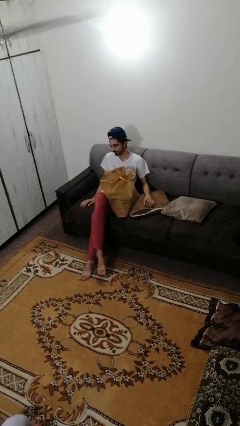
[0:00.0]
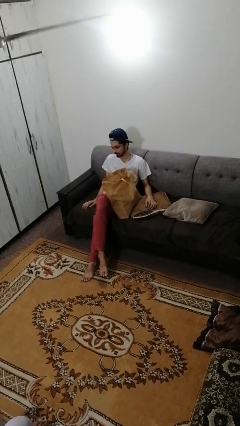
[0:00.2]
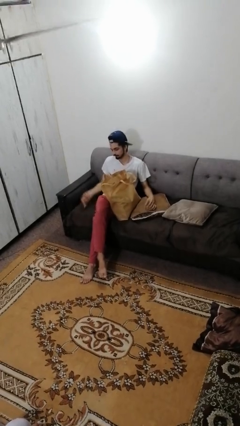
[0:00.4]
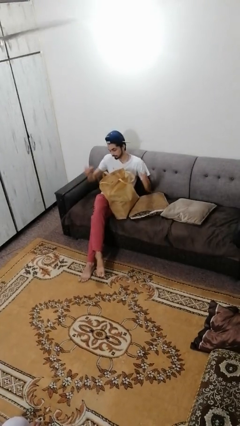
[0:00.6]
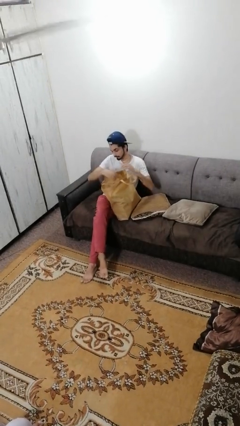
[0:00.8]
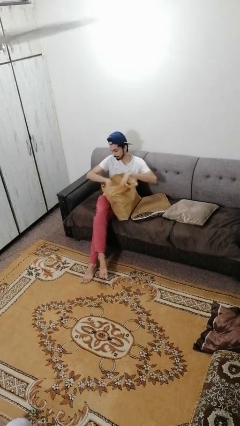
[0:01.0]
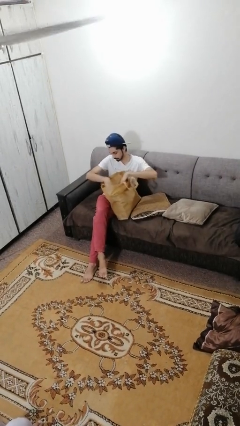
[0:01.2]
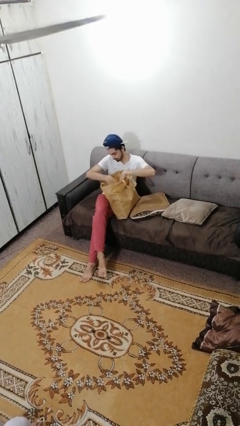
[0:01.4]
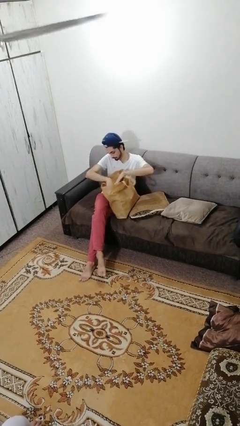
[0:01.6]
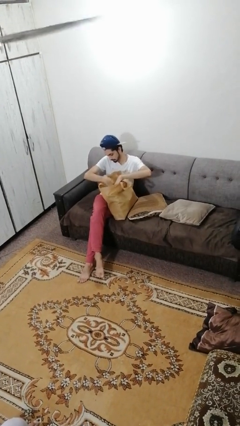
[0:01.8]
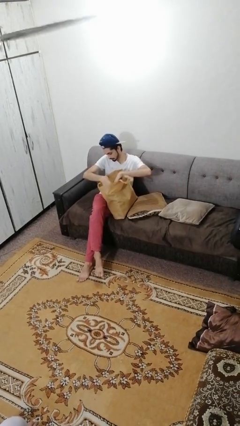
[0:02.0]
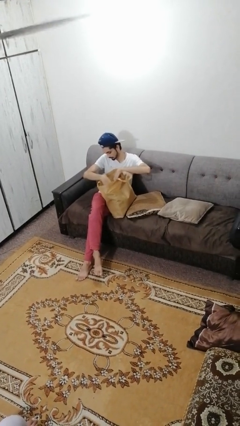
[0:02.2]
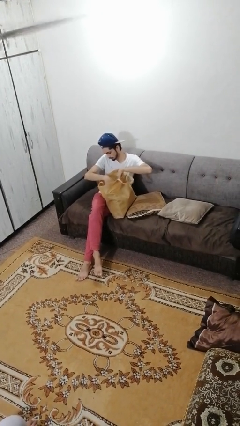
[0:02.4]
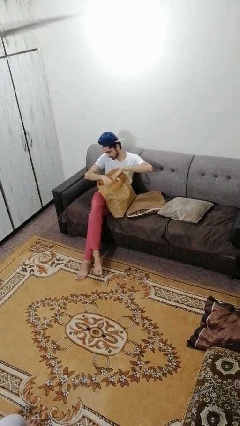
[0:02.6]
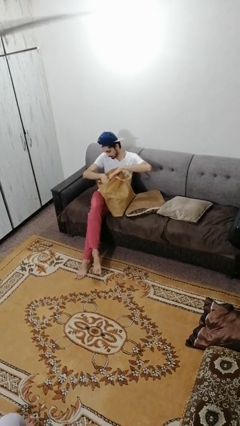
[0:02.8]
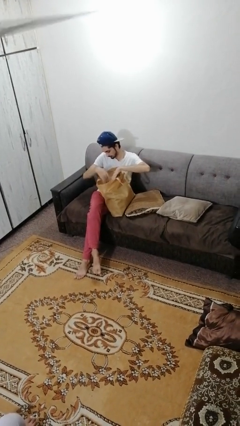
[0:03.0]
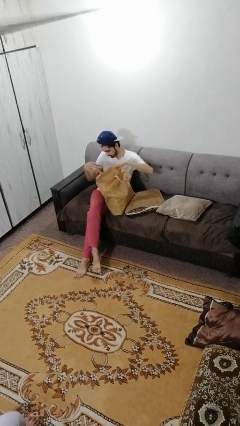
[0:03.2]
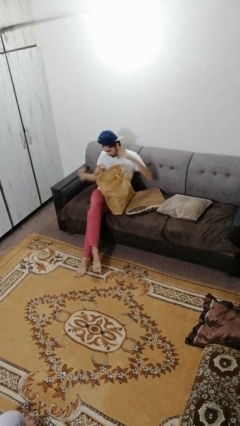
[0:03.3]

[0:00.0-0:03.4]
person searches in bag

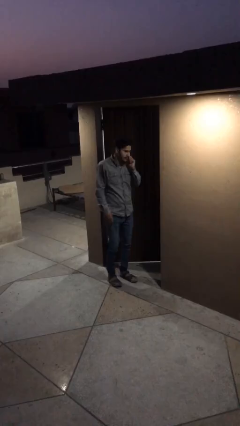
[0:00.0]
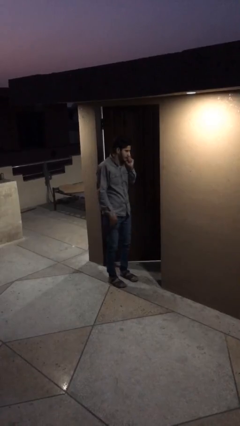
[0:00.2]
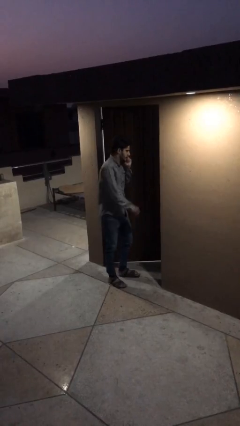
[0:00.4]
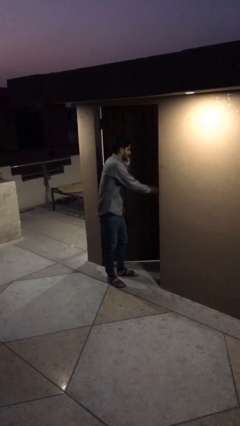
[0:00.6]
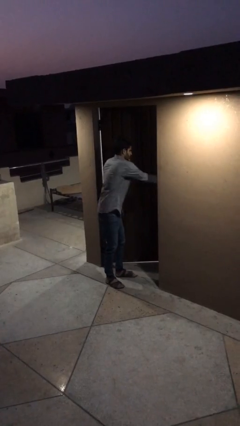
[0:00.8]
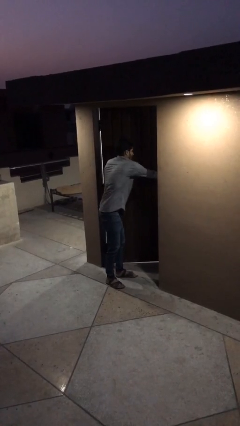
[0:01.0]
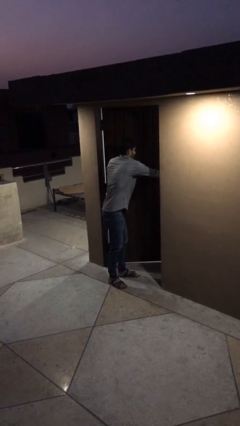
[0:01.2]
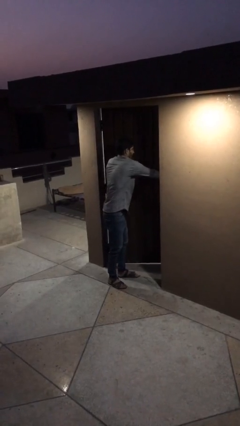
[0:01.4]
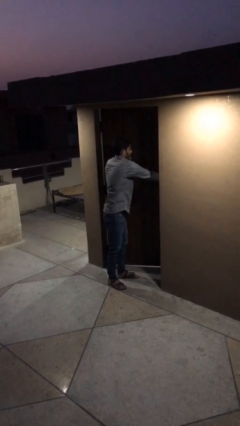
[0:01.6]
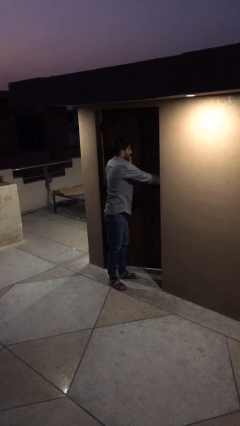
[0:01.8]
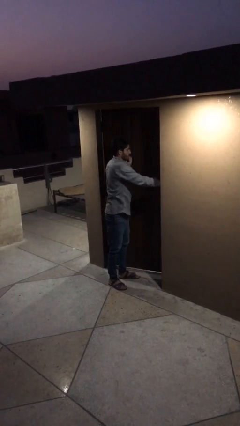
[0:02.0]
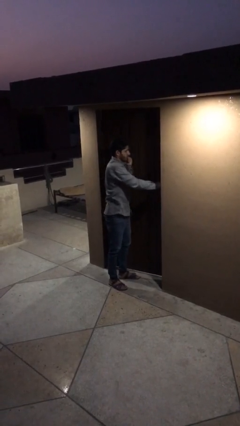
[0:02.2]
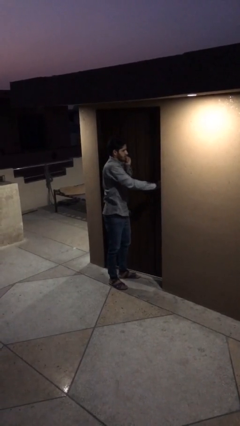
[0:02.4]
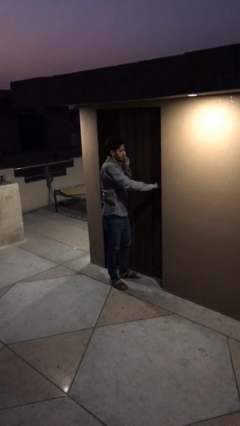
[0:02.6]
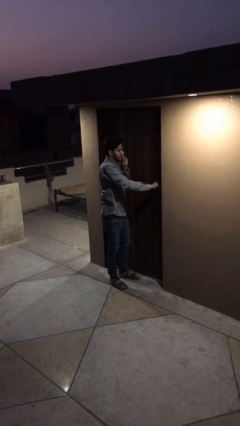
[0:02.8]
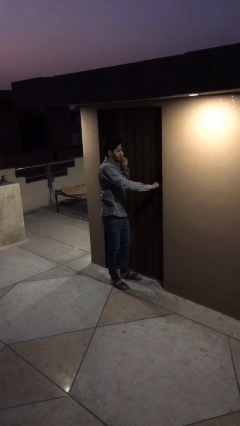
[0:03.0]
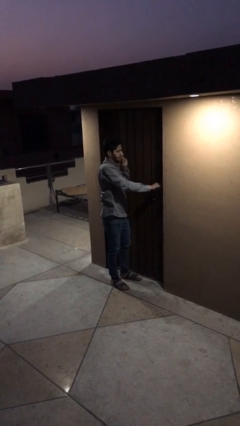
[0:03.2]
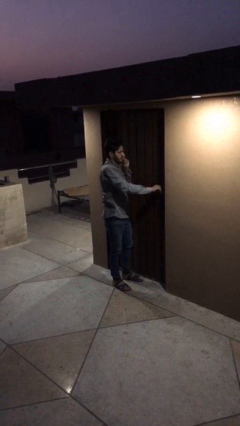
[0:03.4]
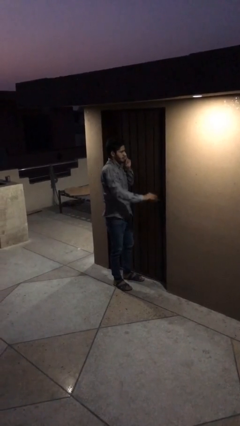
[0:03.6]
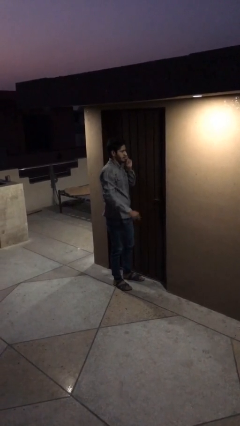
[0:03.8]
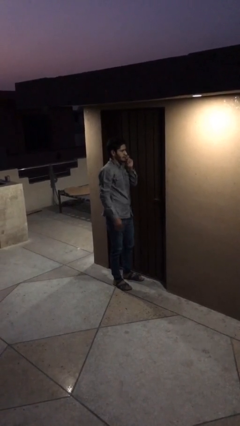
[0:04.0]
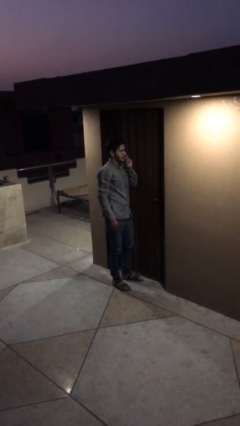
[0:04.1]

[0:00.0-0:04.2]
person closes facility door

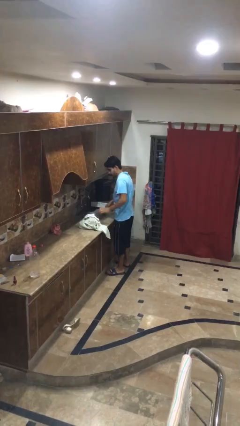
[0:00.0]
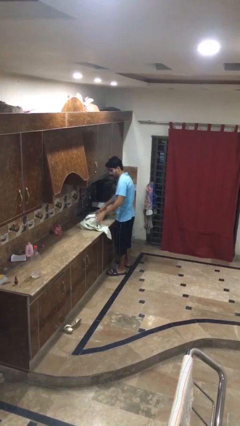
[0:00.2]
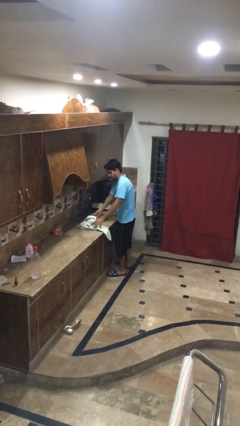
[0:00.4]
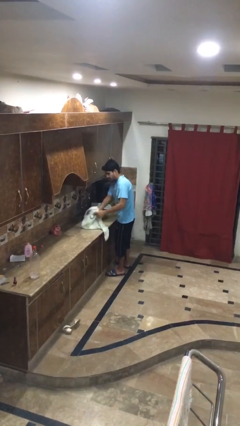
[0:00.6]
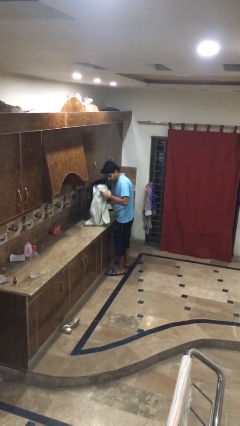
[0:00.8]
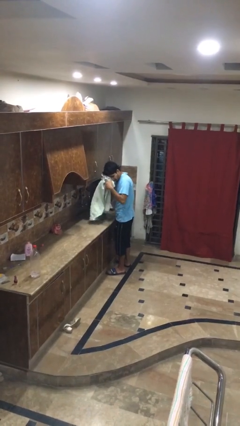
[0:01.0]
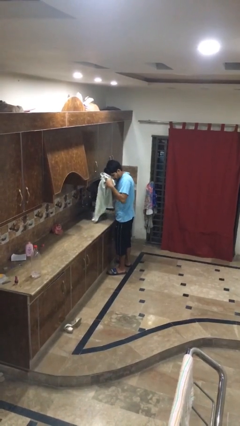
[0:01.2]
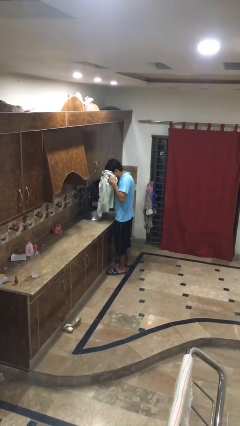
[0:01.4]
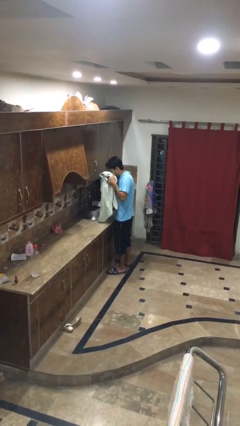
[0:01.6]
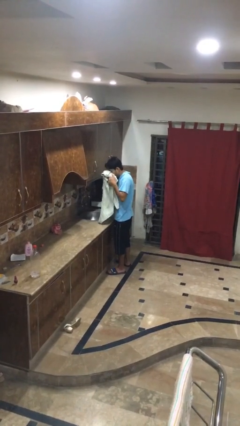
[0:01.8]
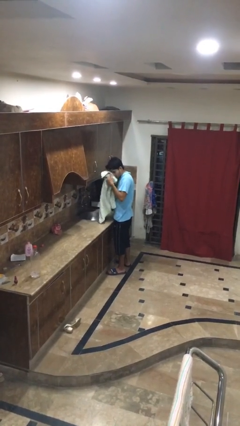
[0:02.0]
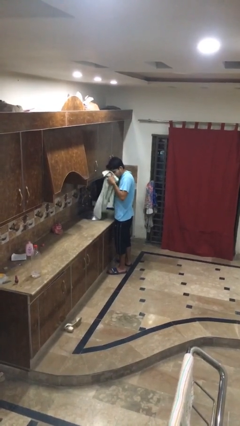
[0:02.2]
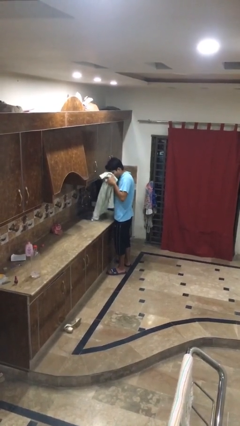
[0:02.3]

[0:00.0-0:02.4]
person dries face with towel

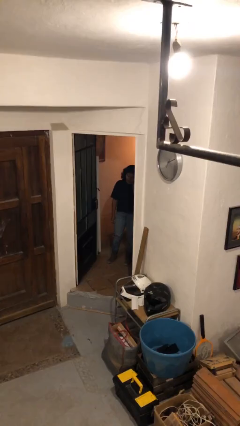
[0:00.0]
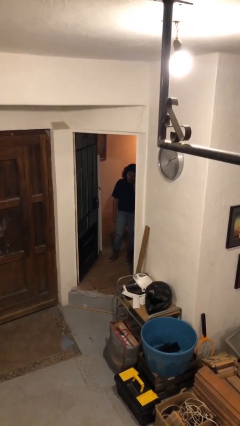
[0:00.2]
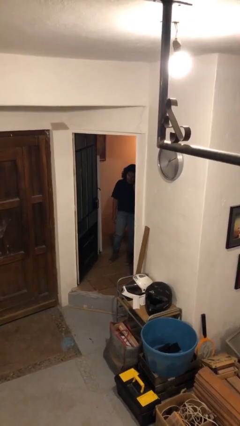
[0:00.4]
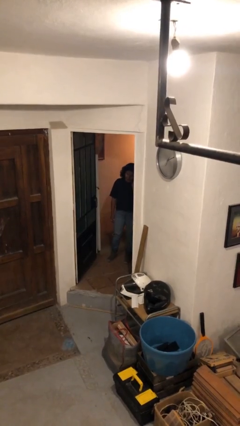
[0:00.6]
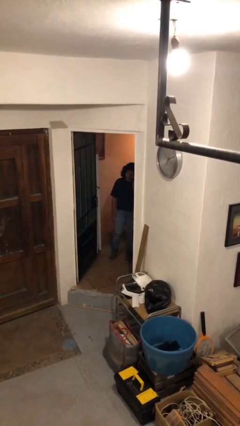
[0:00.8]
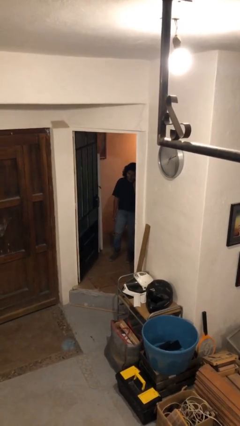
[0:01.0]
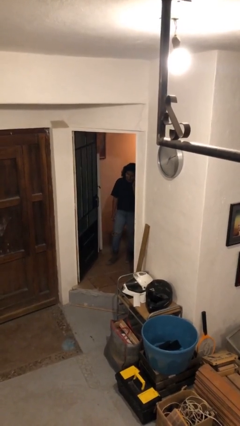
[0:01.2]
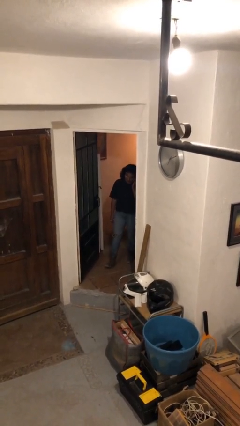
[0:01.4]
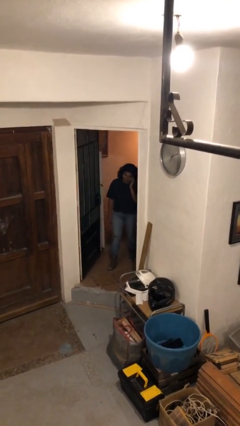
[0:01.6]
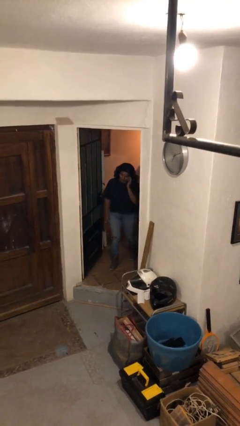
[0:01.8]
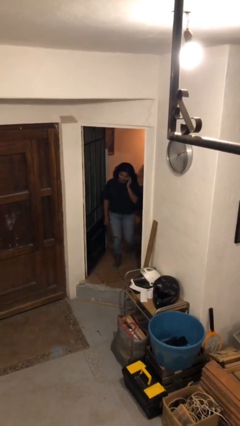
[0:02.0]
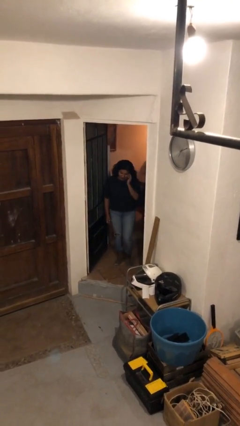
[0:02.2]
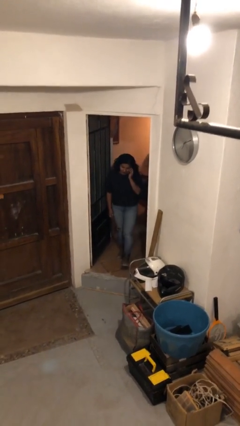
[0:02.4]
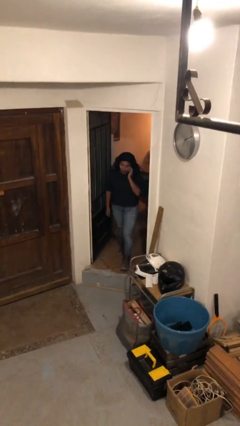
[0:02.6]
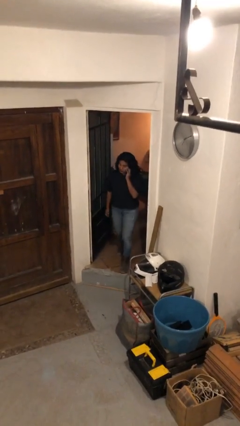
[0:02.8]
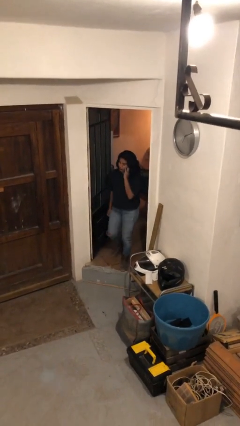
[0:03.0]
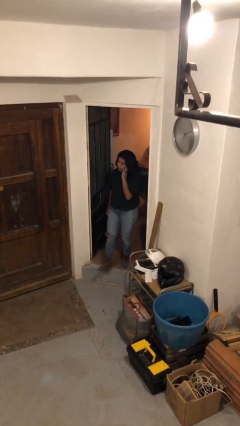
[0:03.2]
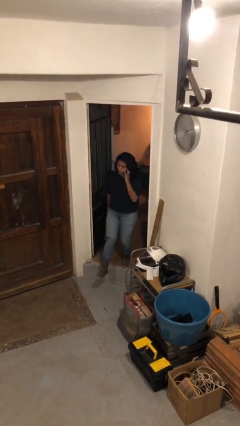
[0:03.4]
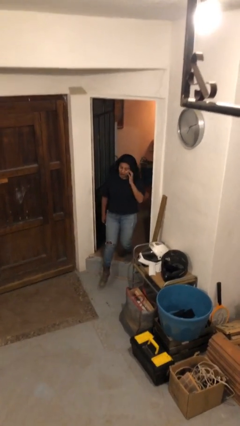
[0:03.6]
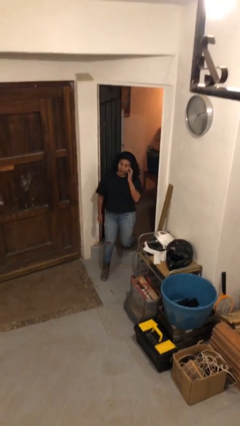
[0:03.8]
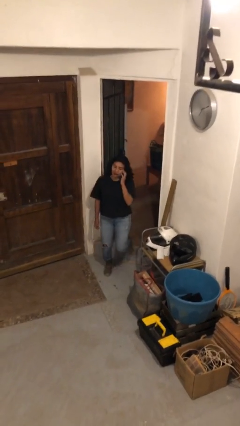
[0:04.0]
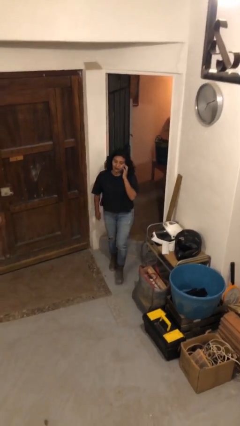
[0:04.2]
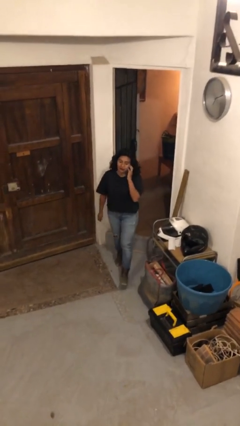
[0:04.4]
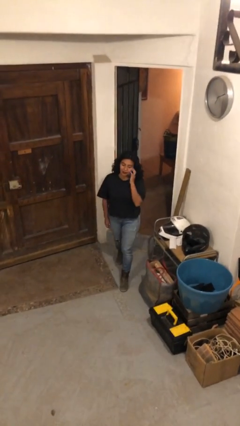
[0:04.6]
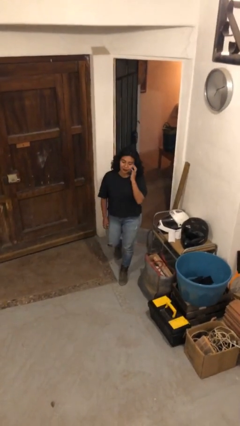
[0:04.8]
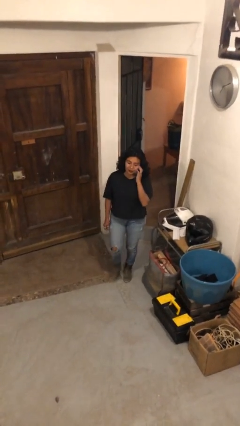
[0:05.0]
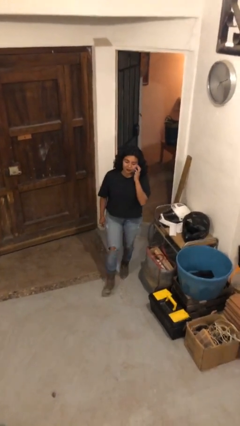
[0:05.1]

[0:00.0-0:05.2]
person enters scene through structure

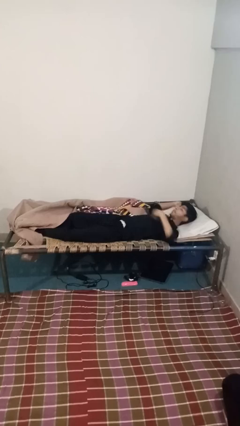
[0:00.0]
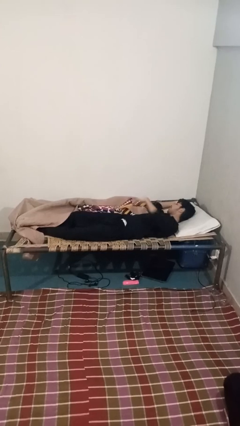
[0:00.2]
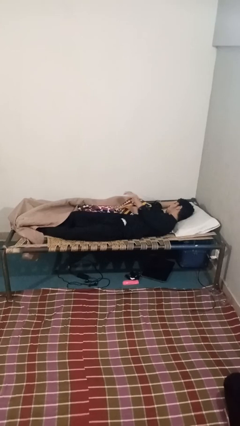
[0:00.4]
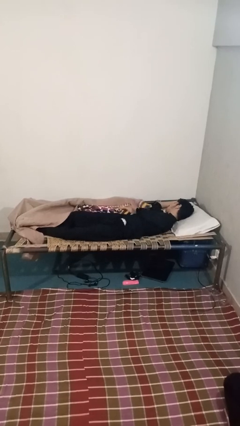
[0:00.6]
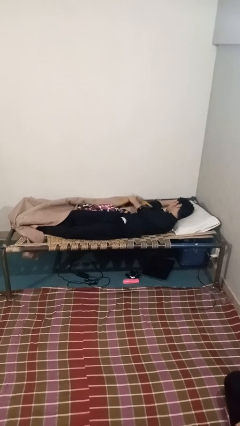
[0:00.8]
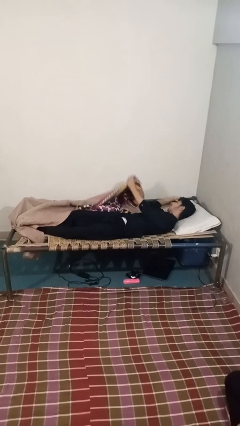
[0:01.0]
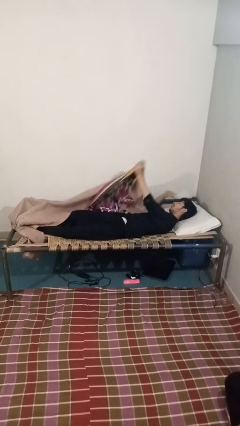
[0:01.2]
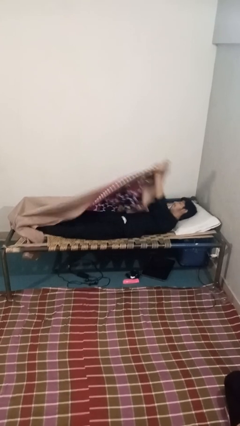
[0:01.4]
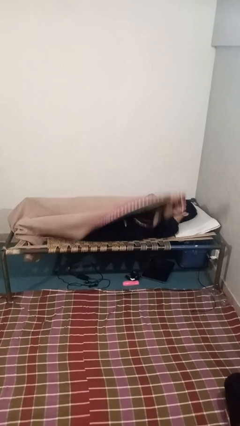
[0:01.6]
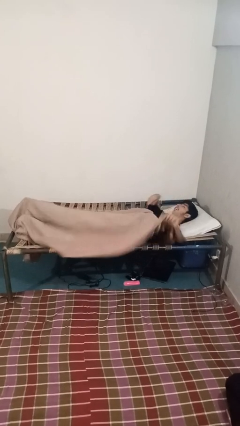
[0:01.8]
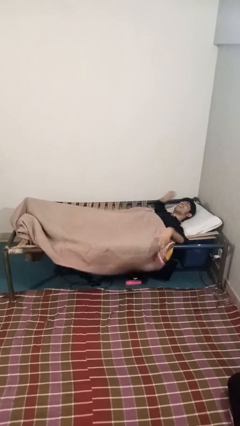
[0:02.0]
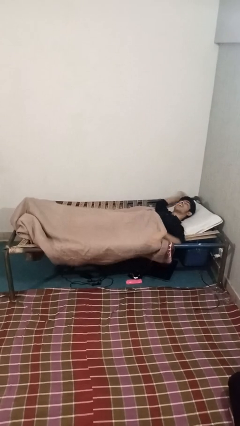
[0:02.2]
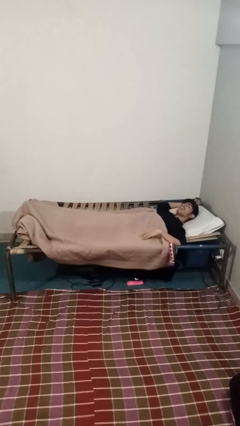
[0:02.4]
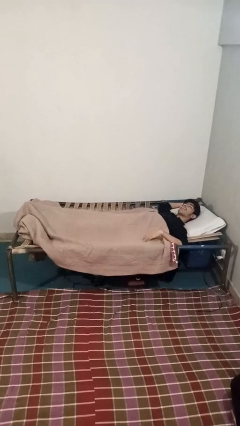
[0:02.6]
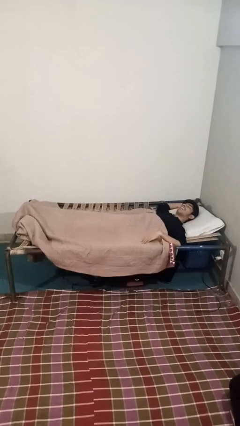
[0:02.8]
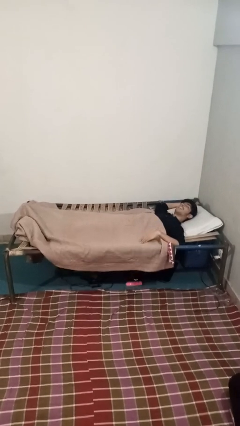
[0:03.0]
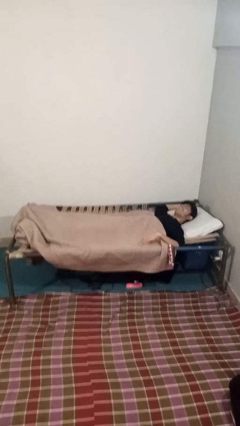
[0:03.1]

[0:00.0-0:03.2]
person covers with blanket
